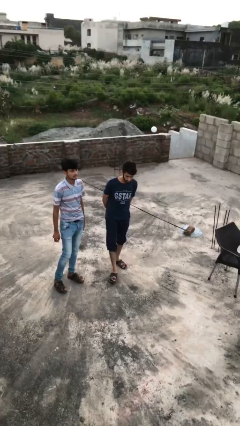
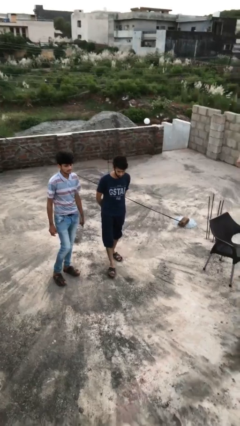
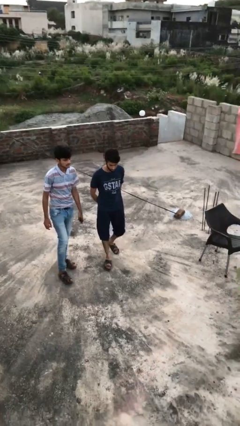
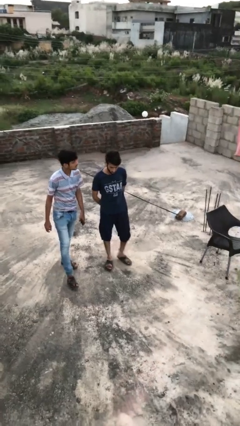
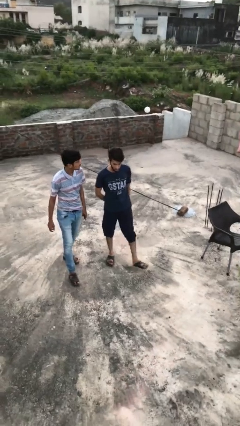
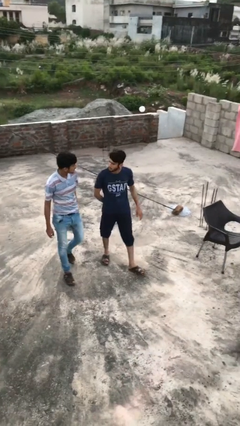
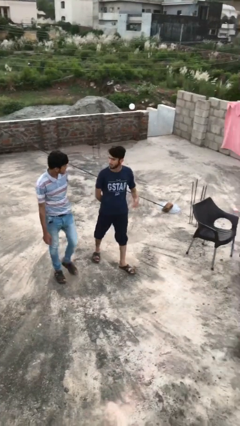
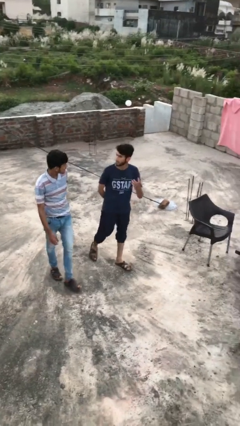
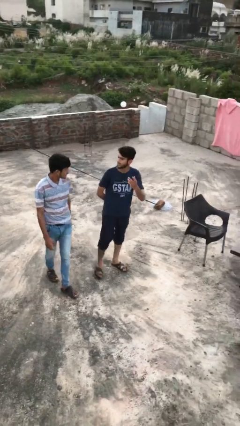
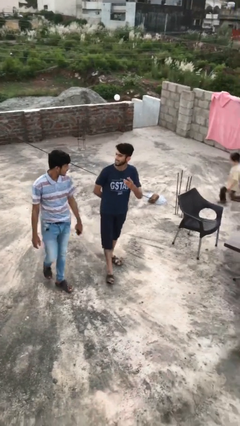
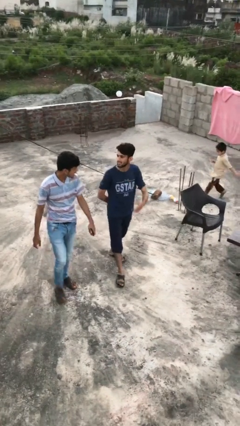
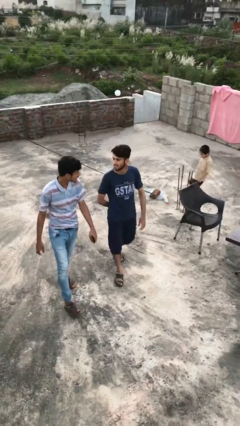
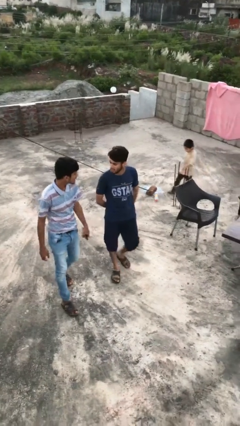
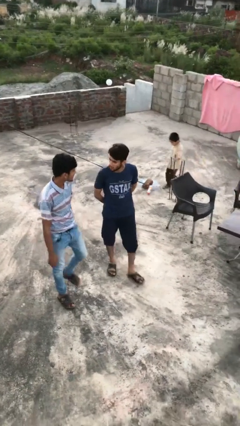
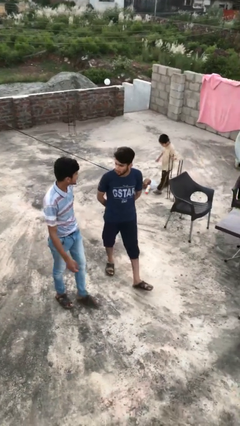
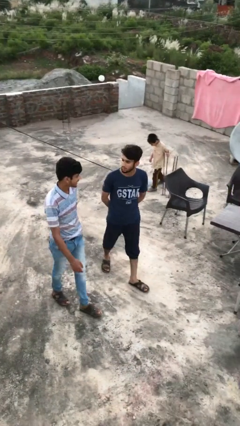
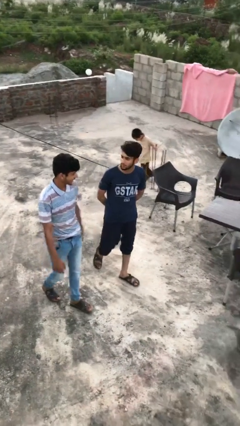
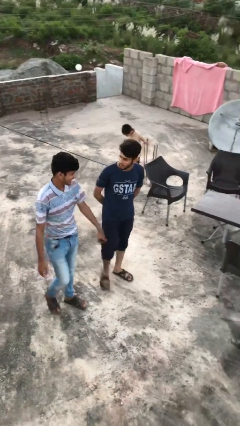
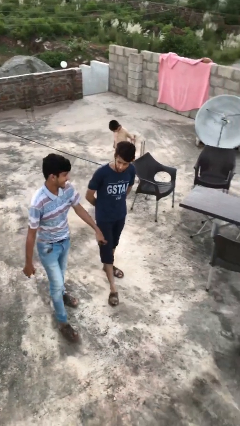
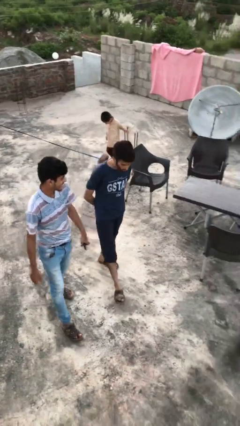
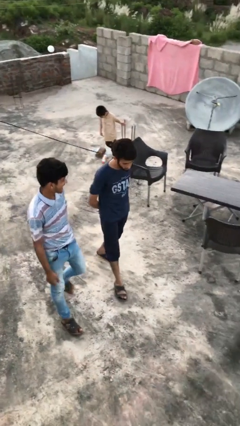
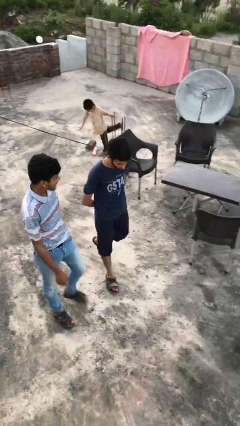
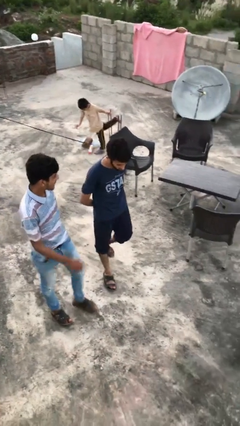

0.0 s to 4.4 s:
person talks to person

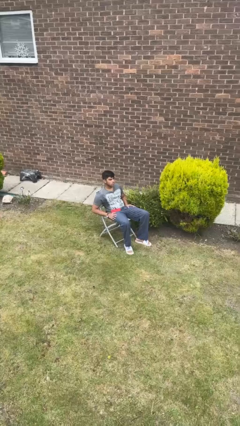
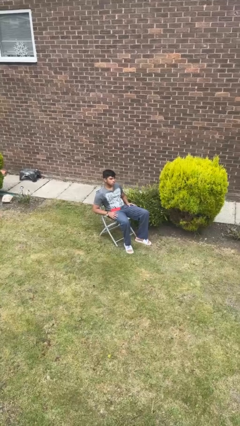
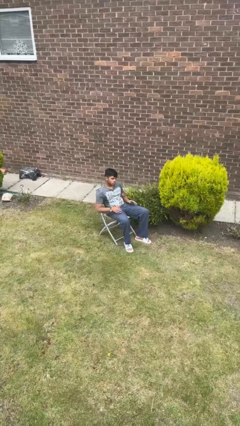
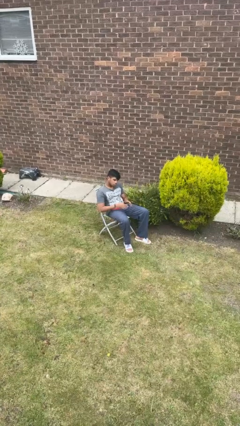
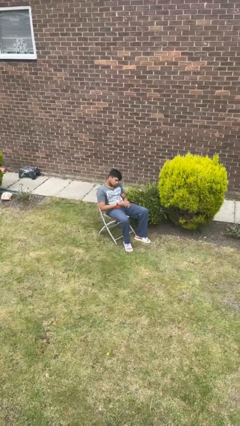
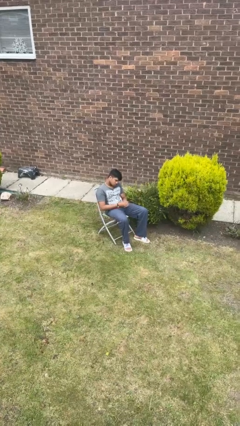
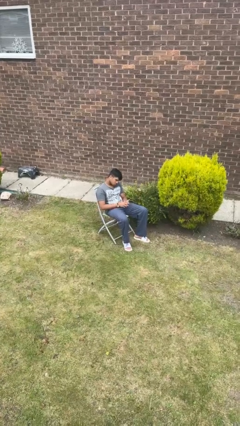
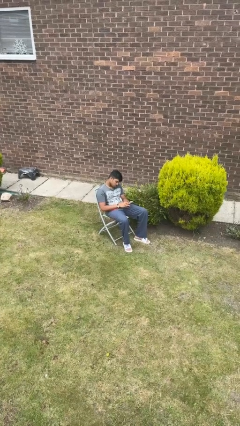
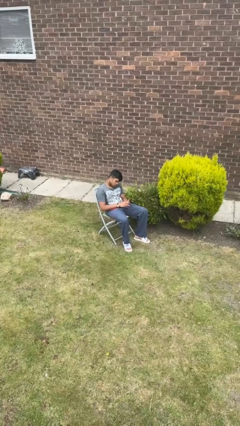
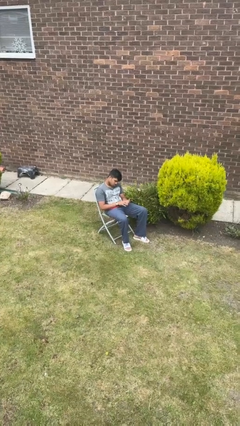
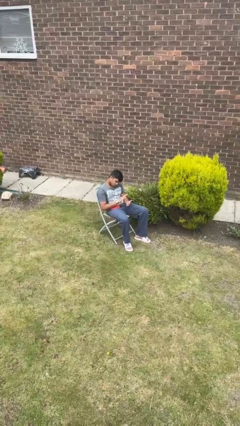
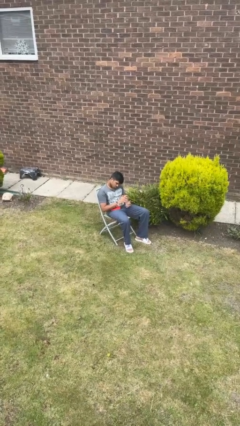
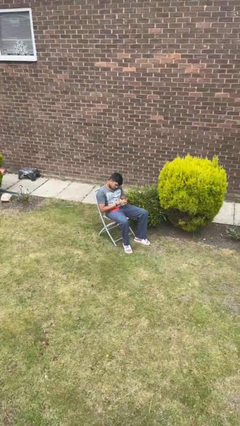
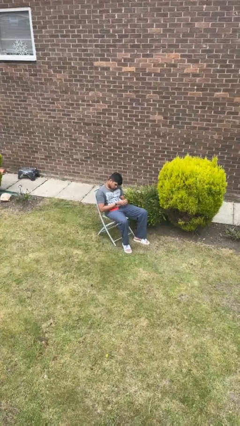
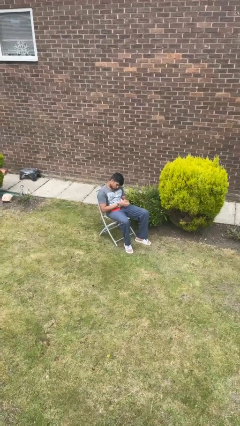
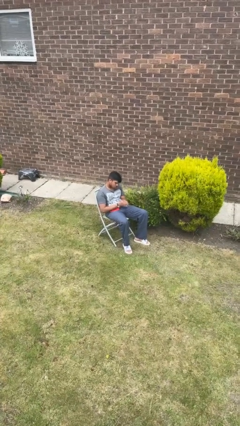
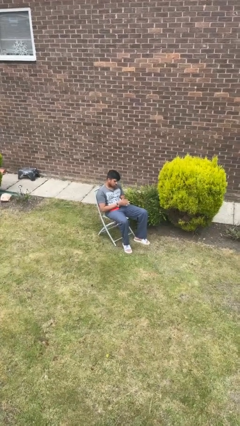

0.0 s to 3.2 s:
person looks at hands in lap

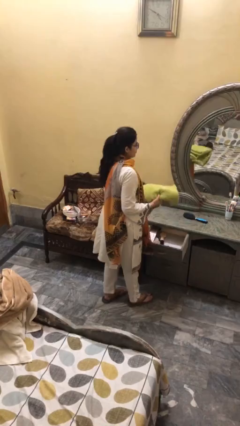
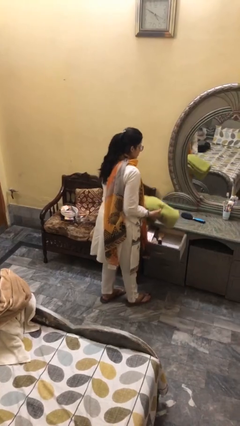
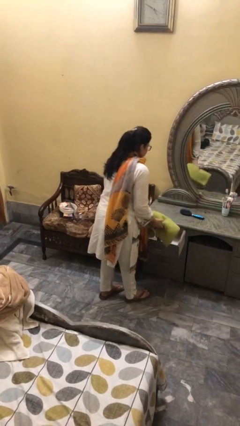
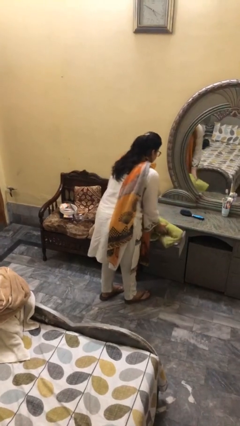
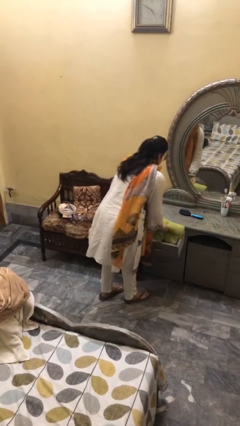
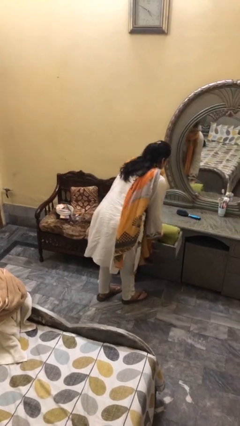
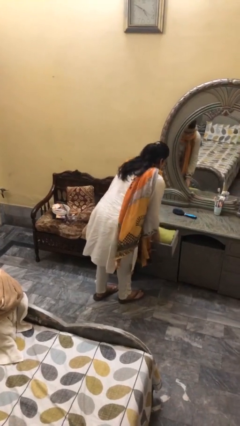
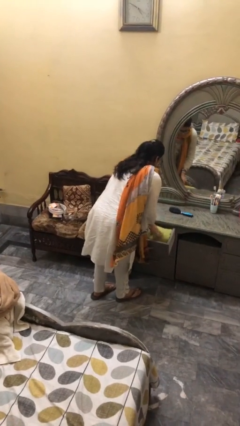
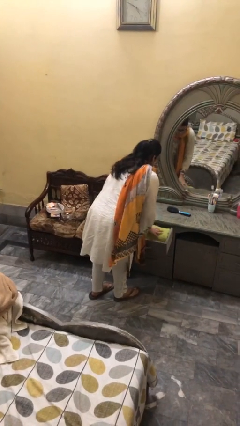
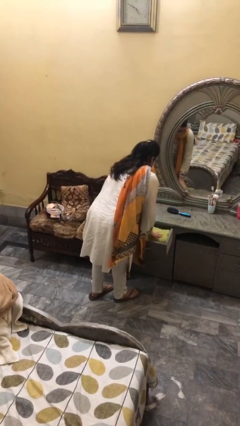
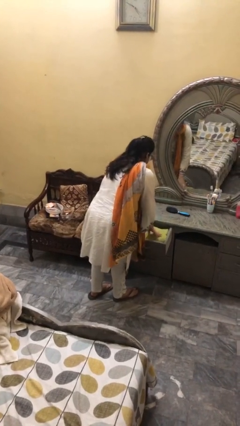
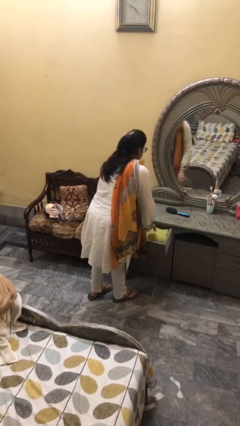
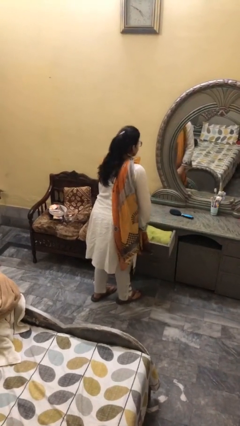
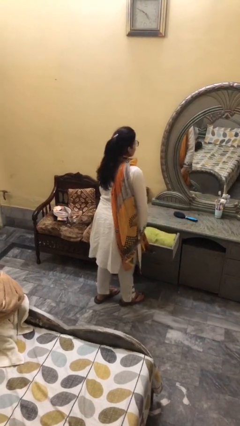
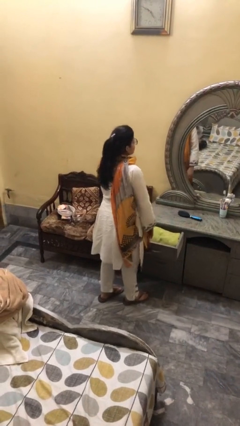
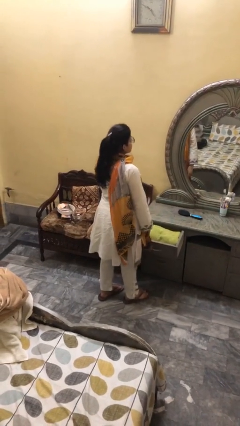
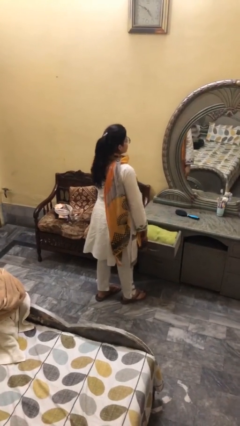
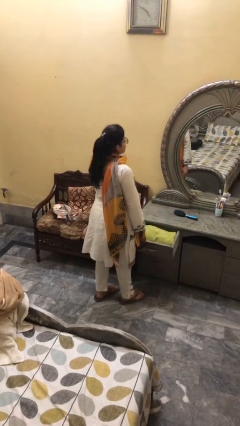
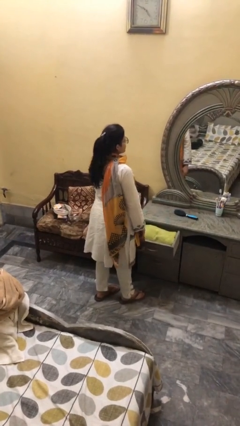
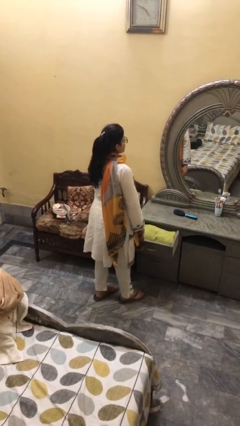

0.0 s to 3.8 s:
person puts clothes into dresser

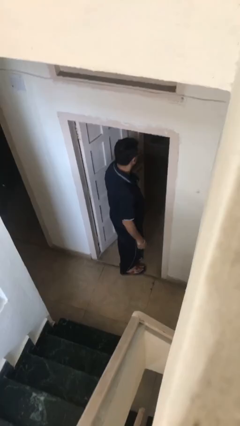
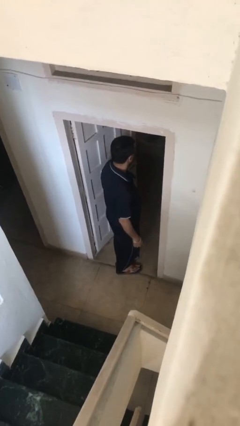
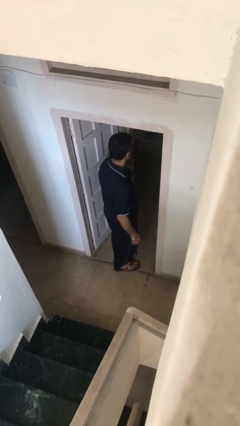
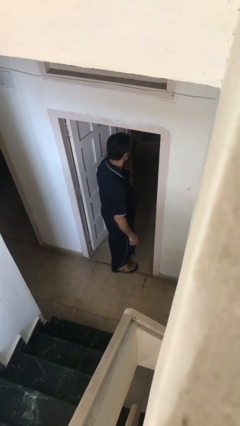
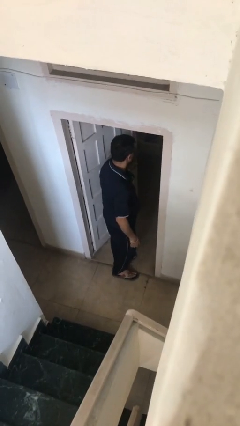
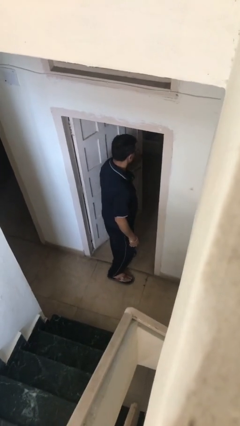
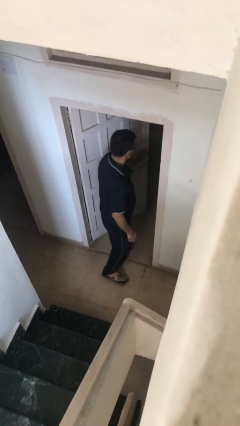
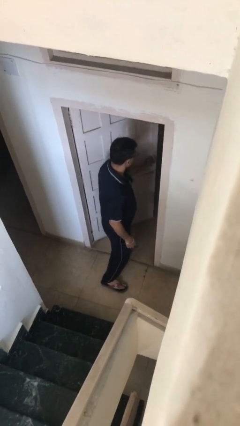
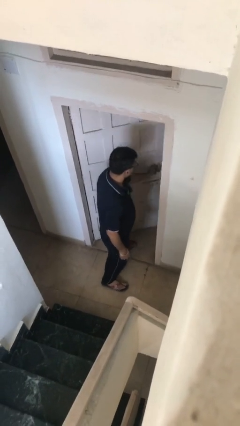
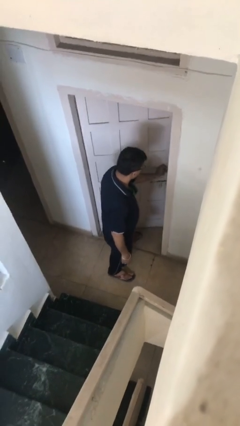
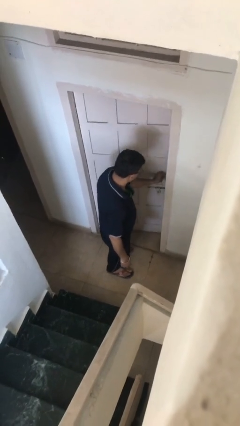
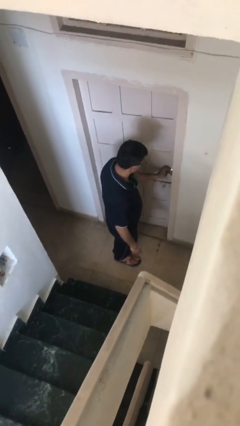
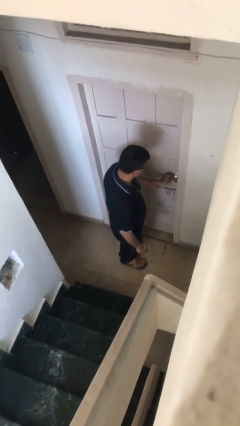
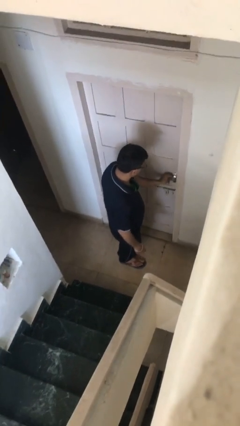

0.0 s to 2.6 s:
person closes facility door

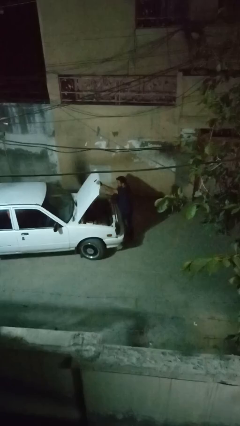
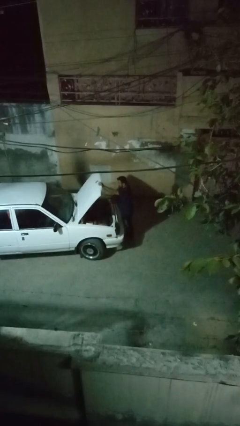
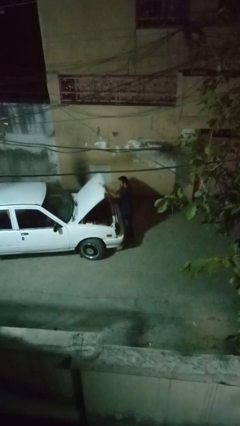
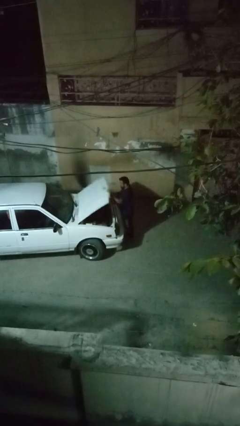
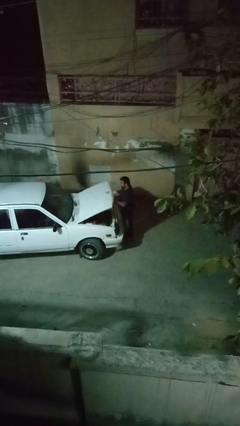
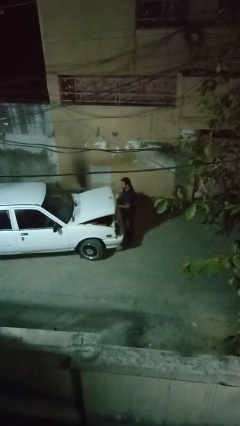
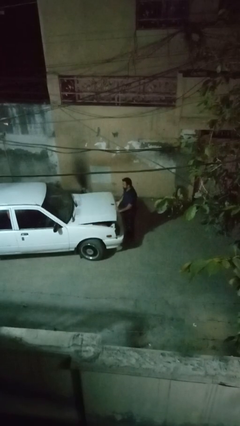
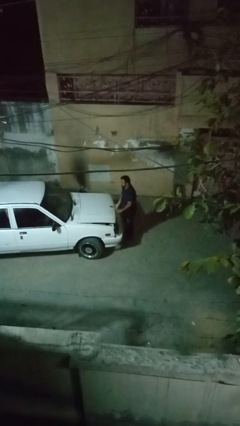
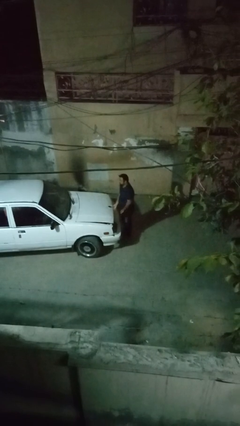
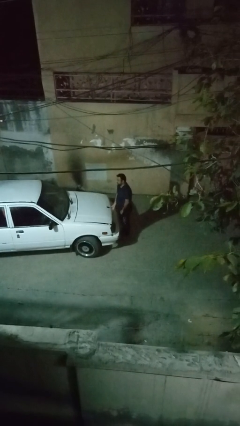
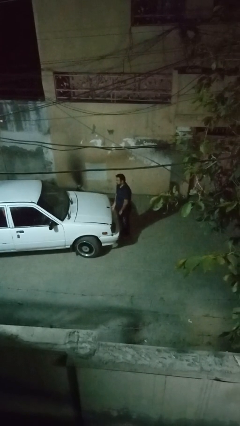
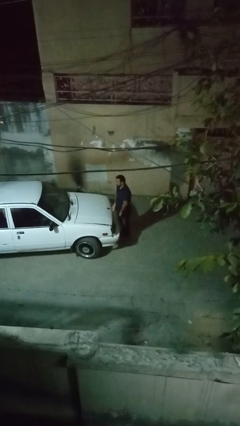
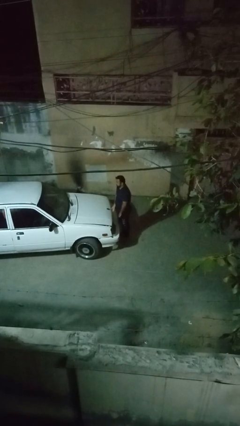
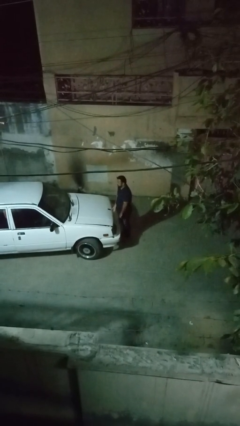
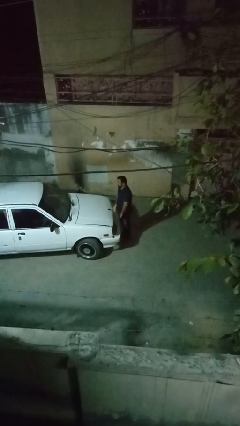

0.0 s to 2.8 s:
person closes car hood

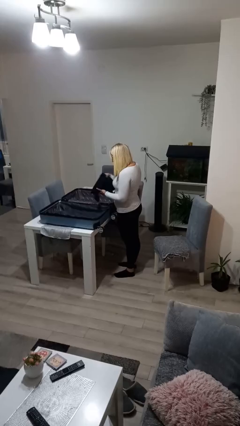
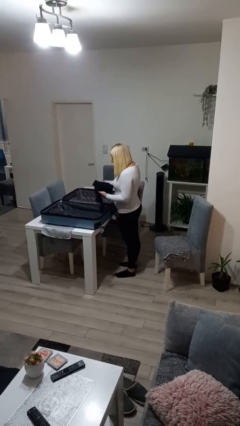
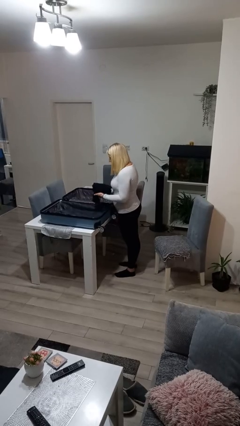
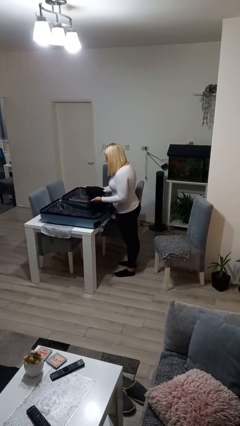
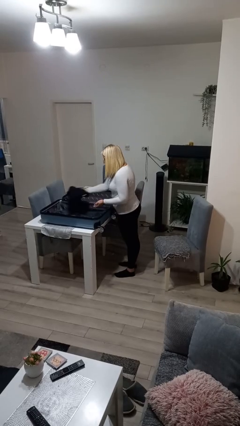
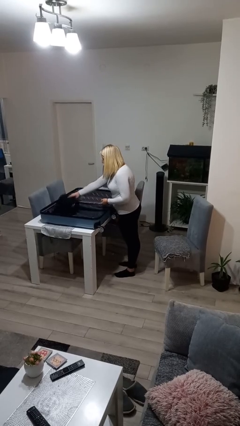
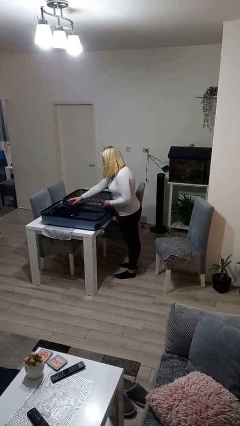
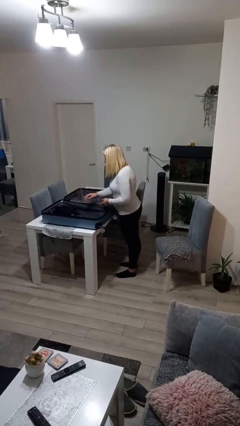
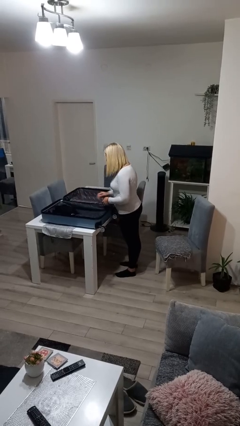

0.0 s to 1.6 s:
person loads clothes into suitcase
